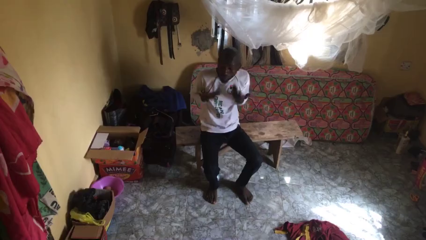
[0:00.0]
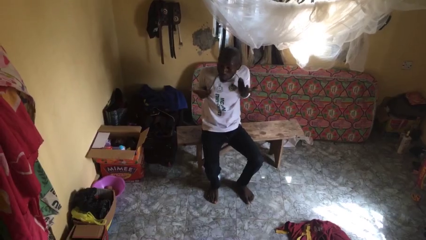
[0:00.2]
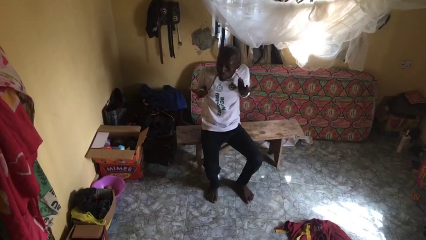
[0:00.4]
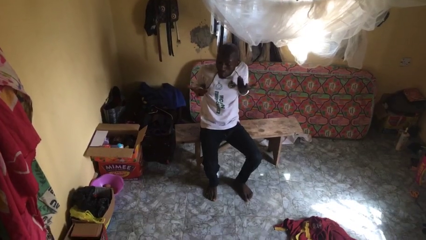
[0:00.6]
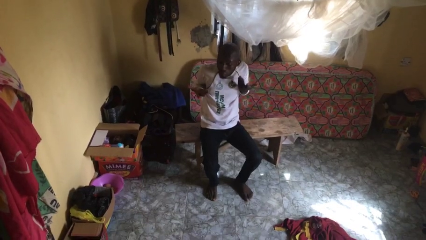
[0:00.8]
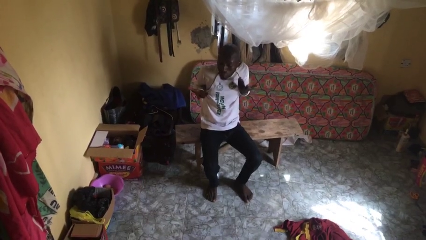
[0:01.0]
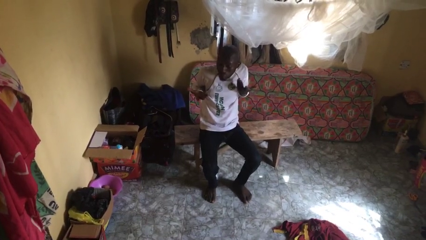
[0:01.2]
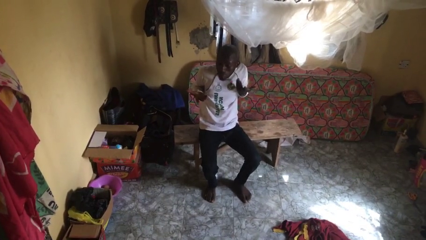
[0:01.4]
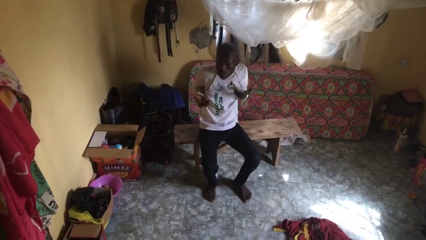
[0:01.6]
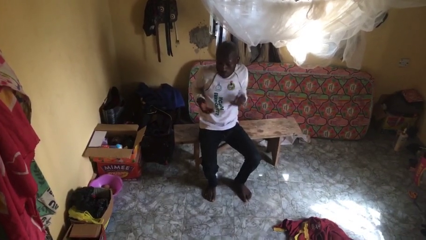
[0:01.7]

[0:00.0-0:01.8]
person shrugs

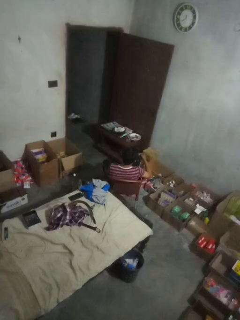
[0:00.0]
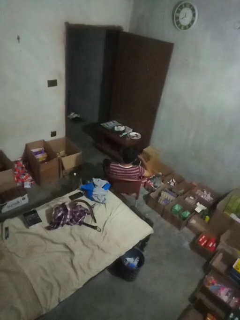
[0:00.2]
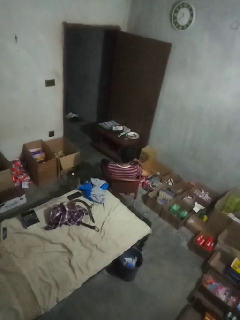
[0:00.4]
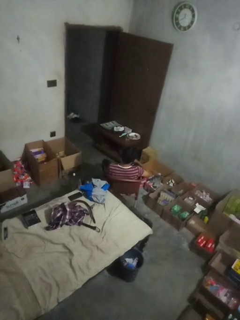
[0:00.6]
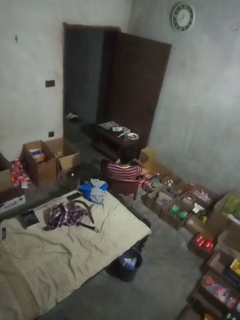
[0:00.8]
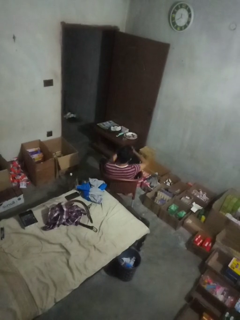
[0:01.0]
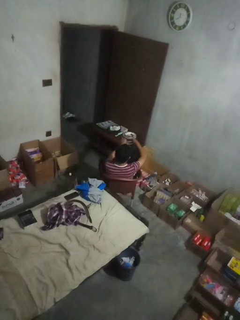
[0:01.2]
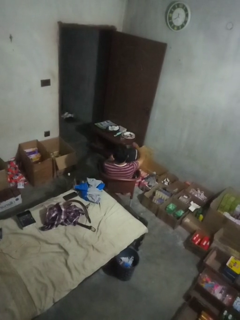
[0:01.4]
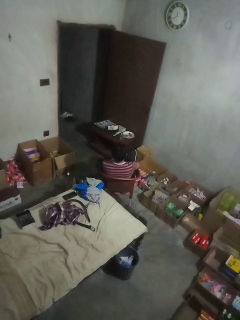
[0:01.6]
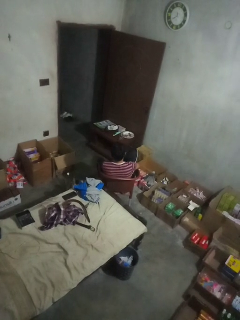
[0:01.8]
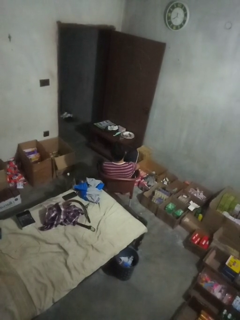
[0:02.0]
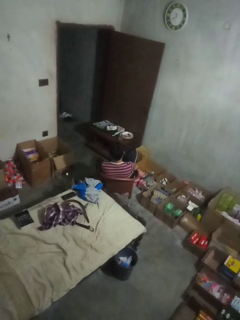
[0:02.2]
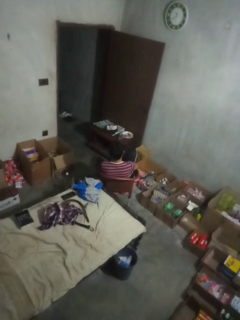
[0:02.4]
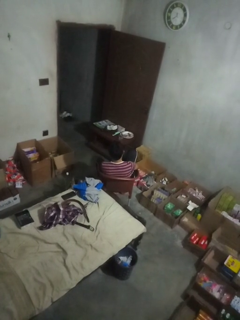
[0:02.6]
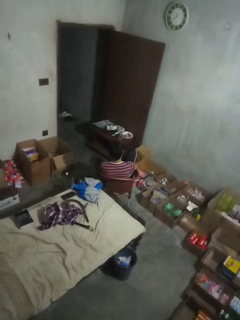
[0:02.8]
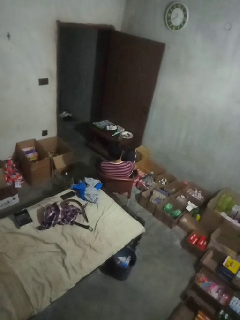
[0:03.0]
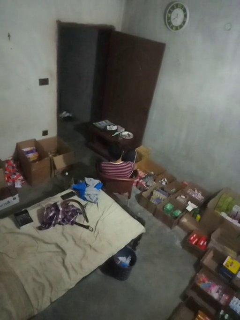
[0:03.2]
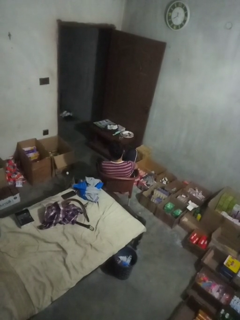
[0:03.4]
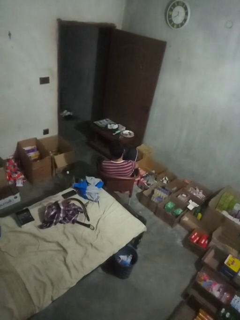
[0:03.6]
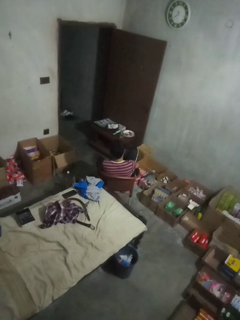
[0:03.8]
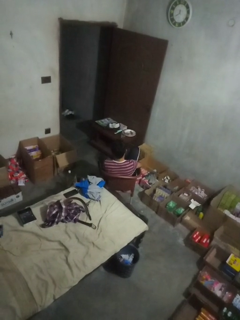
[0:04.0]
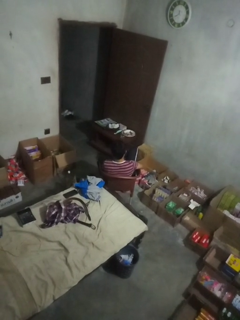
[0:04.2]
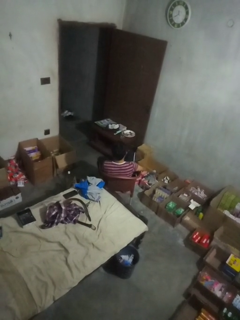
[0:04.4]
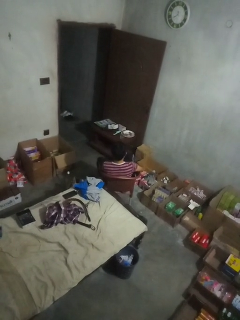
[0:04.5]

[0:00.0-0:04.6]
person puts on socks

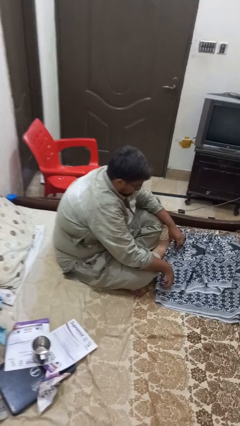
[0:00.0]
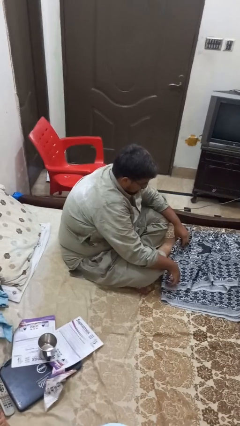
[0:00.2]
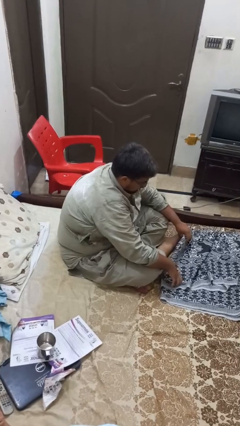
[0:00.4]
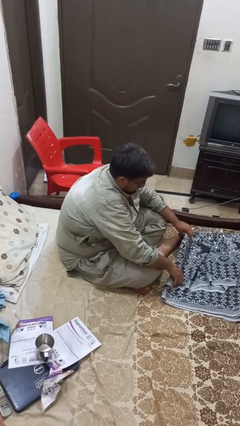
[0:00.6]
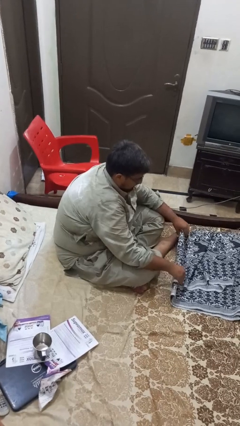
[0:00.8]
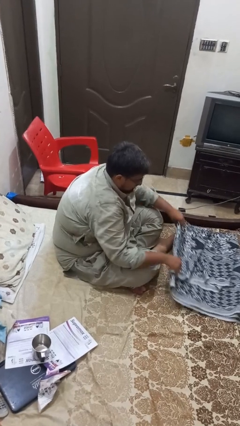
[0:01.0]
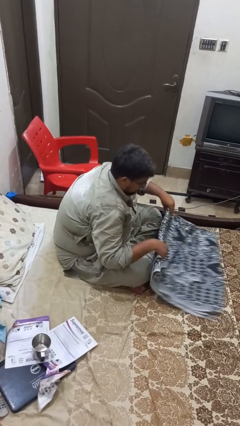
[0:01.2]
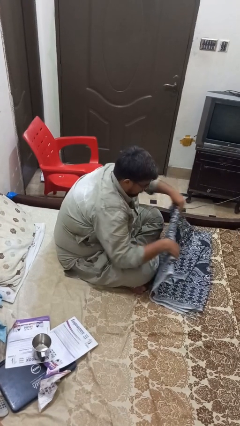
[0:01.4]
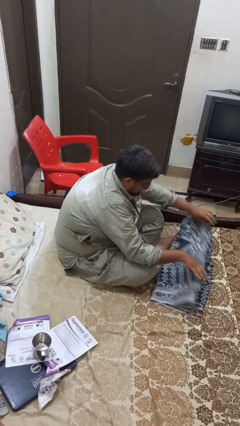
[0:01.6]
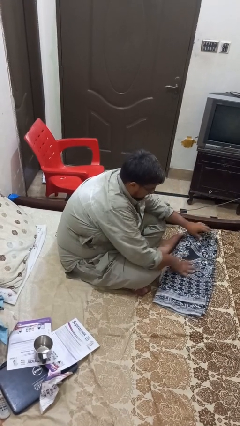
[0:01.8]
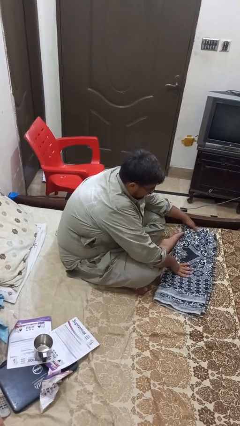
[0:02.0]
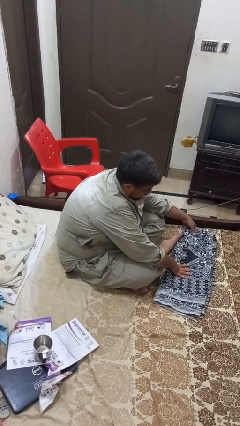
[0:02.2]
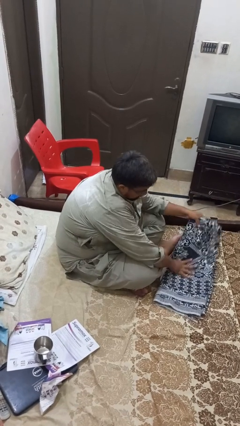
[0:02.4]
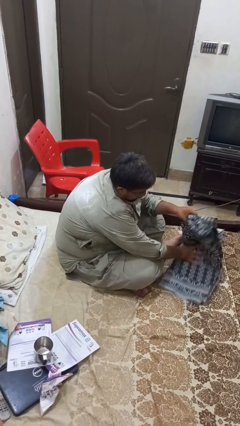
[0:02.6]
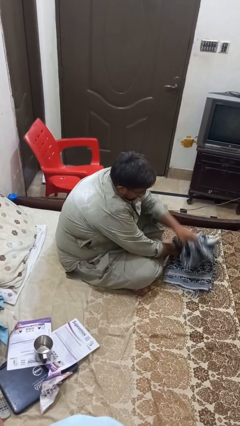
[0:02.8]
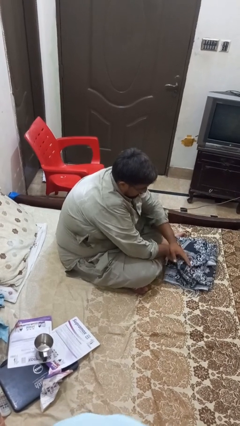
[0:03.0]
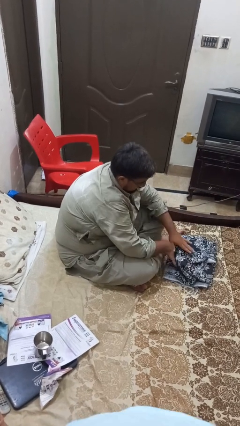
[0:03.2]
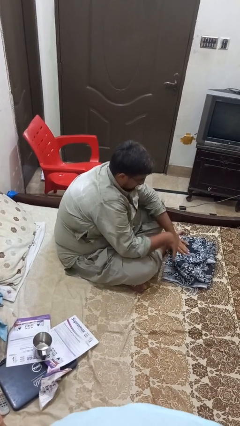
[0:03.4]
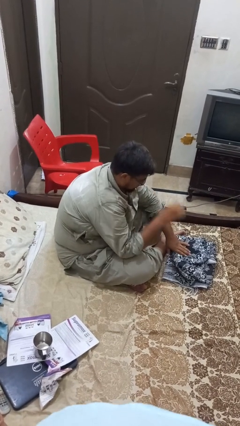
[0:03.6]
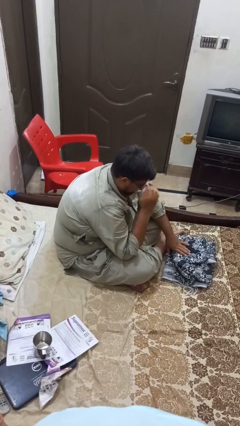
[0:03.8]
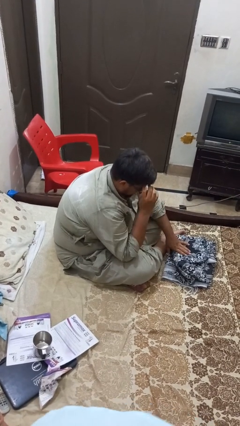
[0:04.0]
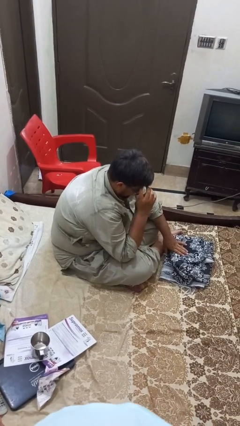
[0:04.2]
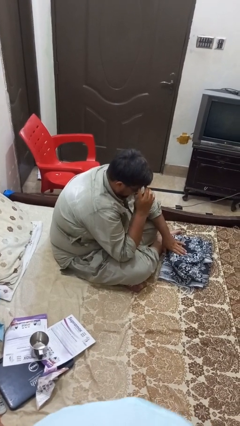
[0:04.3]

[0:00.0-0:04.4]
person folds blanket

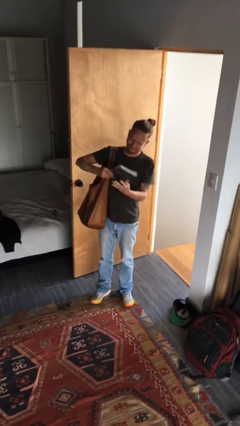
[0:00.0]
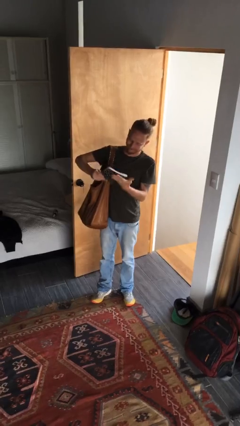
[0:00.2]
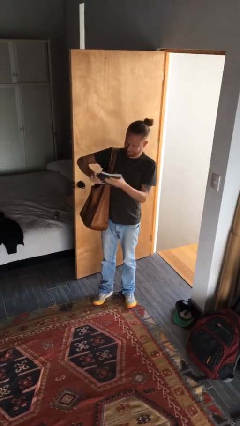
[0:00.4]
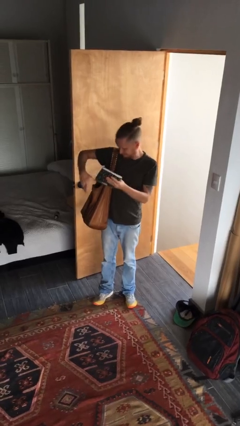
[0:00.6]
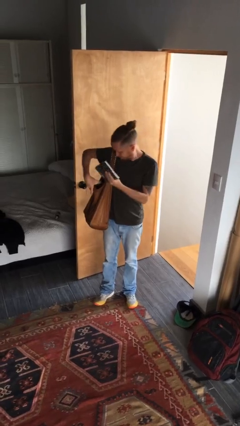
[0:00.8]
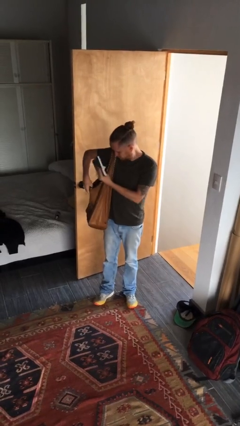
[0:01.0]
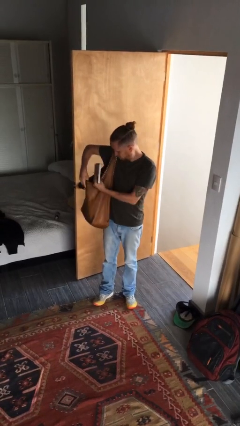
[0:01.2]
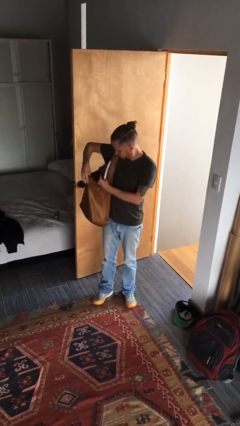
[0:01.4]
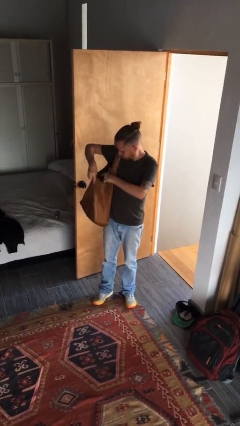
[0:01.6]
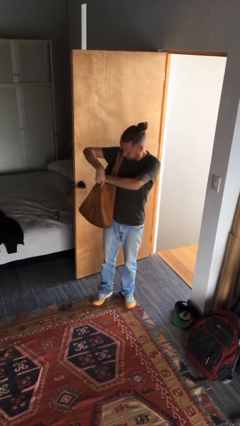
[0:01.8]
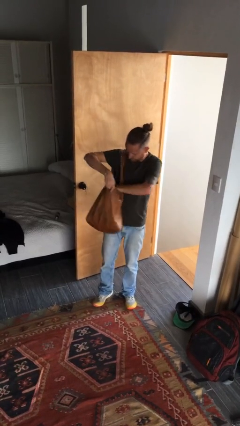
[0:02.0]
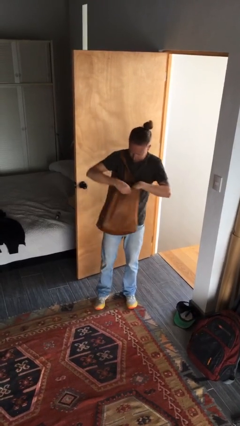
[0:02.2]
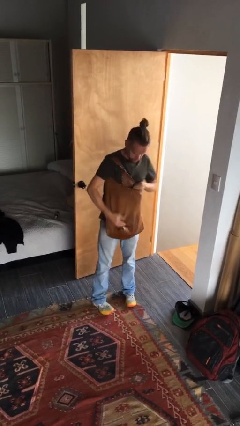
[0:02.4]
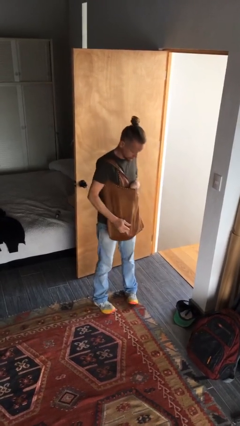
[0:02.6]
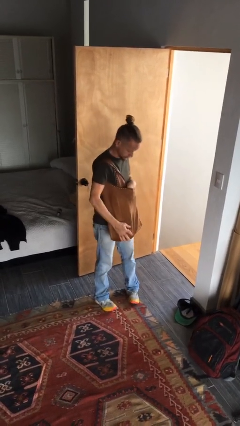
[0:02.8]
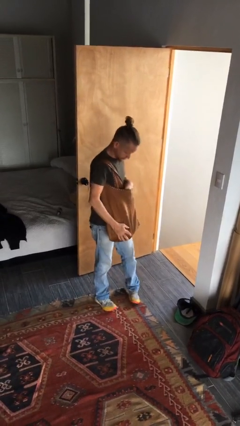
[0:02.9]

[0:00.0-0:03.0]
person puts object into purse

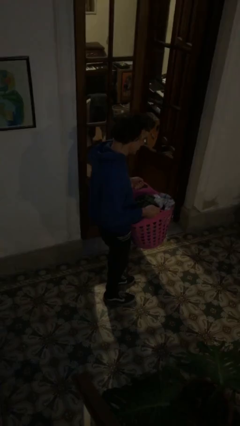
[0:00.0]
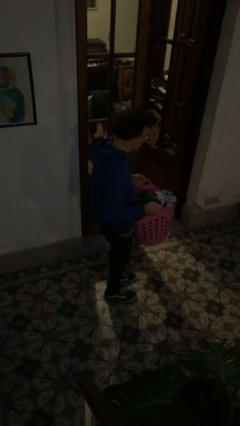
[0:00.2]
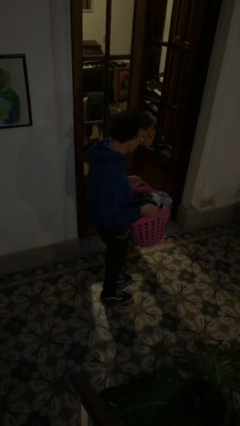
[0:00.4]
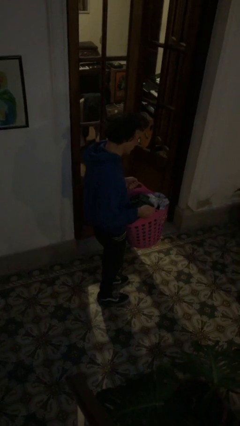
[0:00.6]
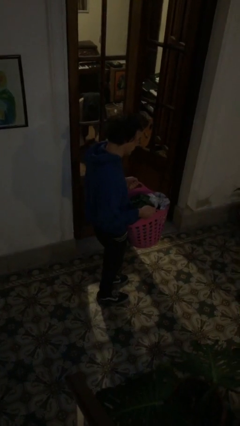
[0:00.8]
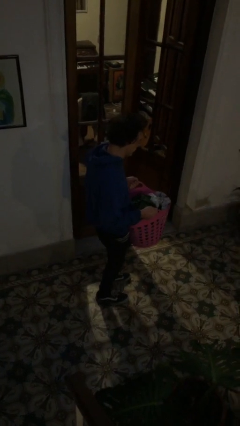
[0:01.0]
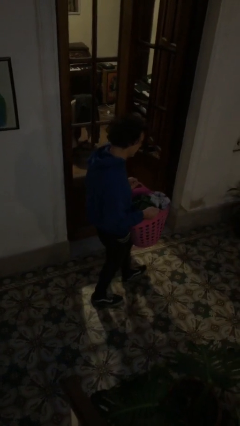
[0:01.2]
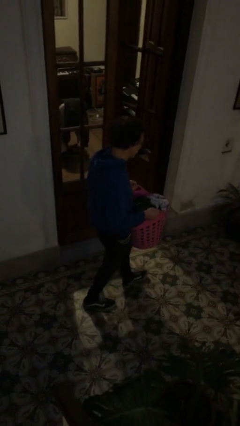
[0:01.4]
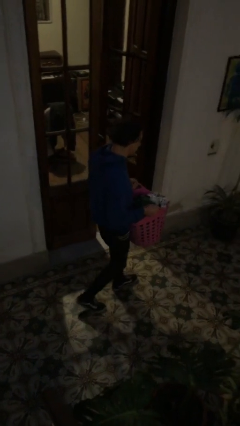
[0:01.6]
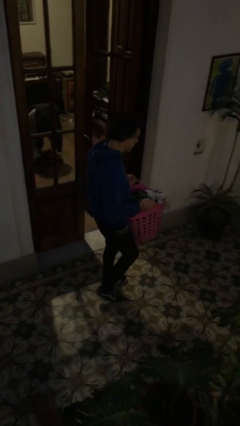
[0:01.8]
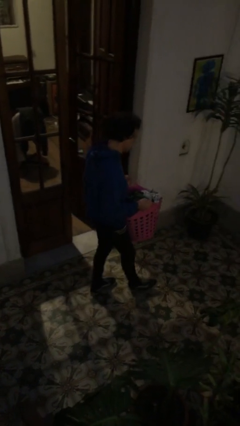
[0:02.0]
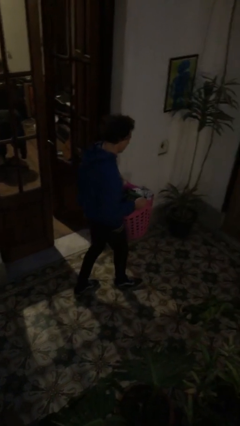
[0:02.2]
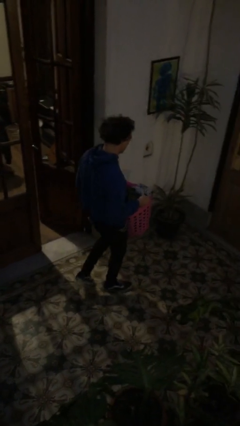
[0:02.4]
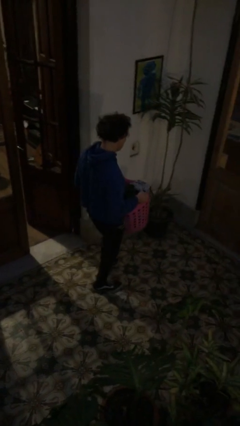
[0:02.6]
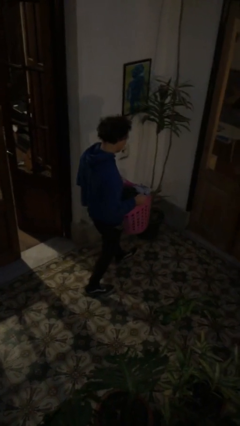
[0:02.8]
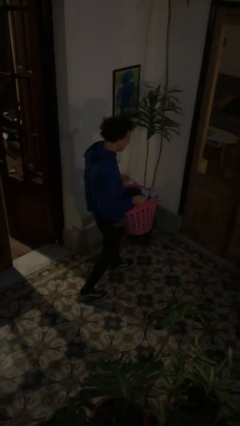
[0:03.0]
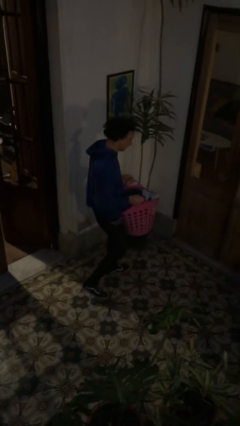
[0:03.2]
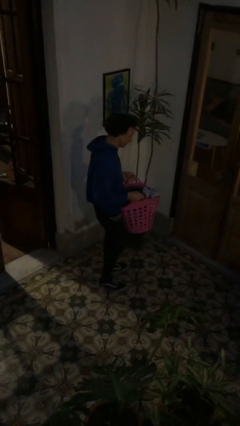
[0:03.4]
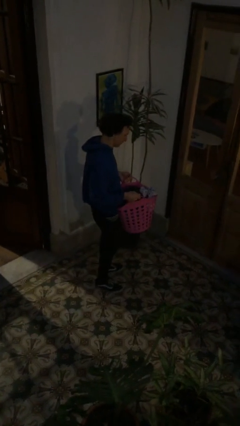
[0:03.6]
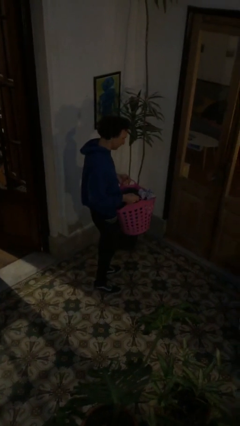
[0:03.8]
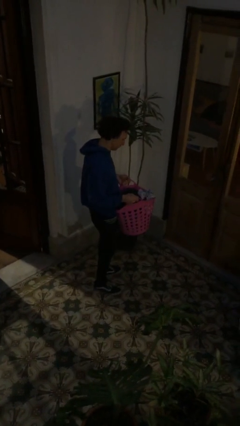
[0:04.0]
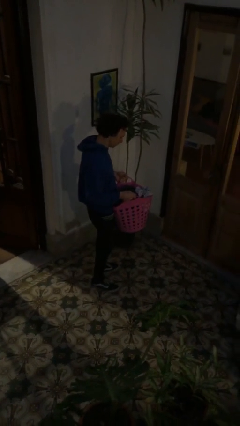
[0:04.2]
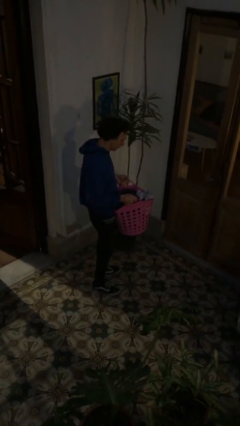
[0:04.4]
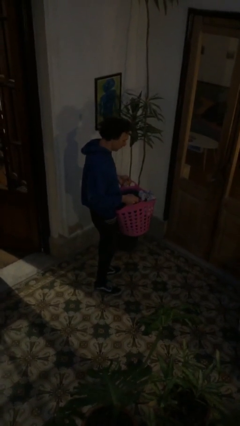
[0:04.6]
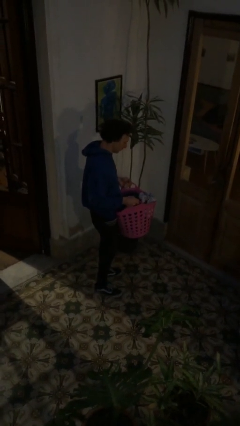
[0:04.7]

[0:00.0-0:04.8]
person carries laundry basket

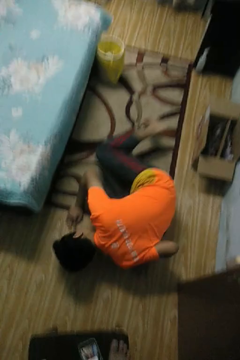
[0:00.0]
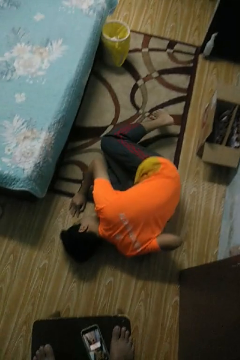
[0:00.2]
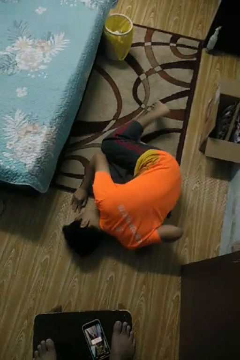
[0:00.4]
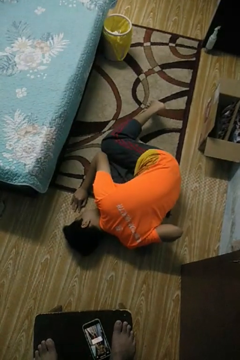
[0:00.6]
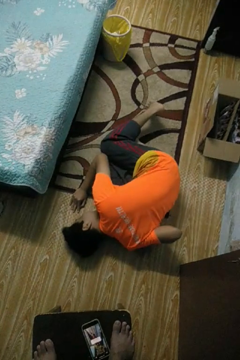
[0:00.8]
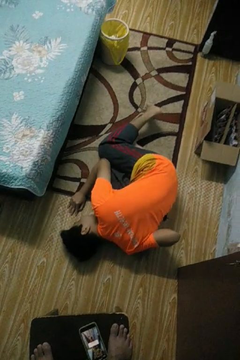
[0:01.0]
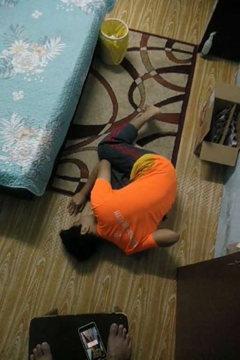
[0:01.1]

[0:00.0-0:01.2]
person lies down on floor
